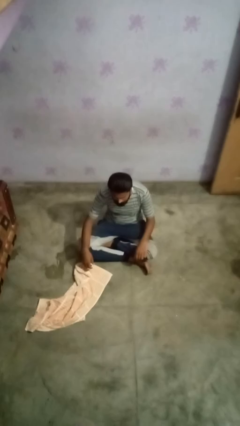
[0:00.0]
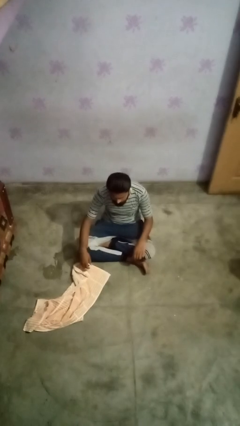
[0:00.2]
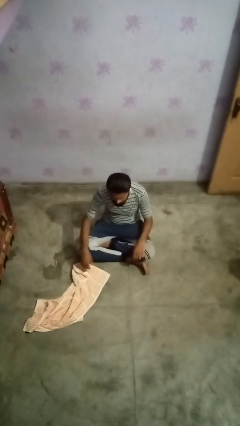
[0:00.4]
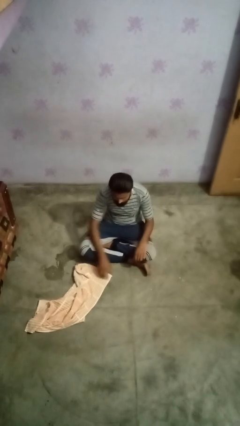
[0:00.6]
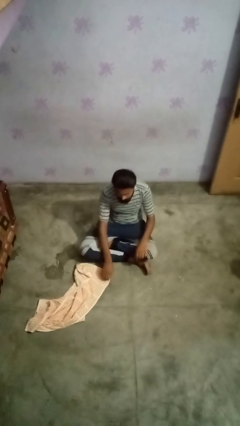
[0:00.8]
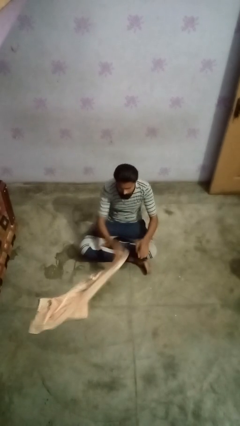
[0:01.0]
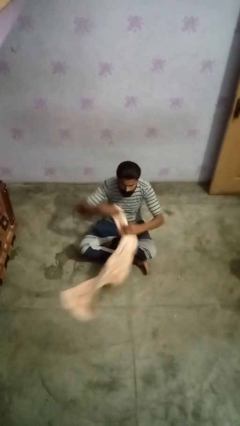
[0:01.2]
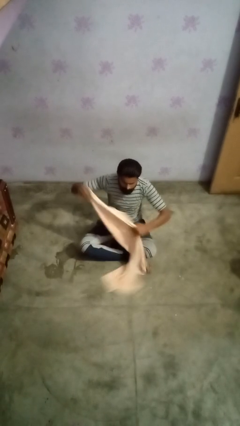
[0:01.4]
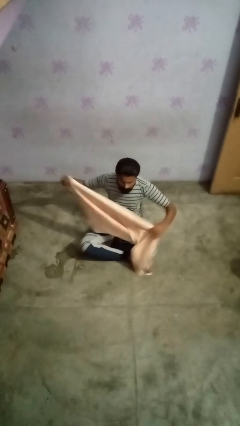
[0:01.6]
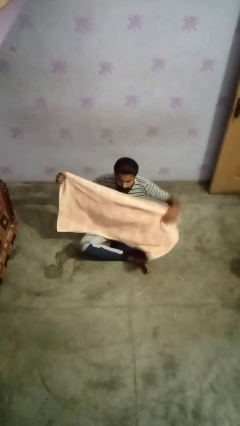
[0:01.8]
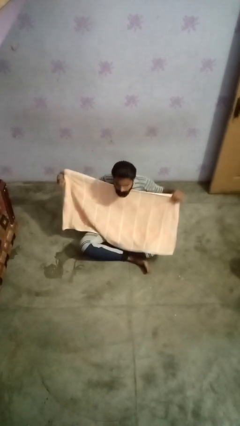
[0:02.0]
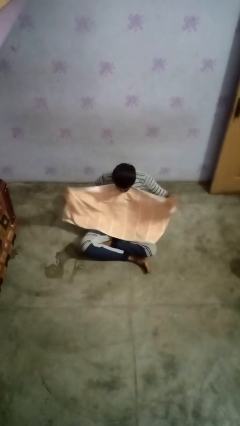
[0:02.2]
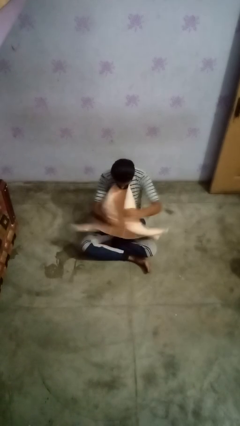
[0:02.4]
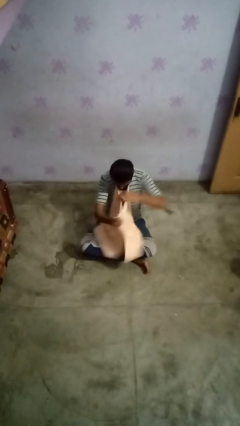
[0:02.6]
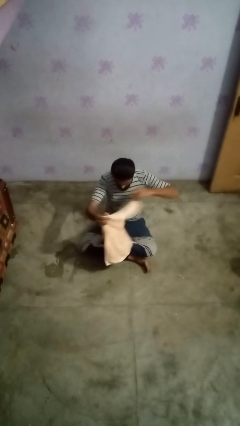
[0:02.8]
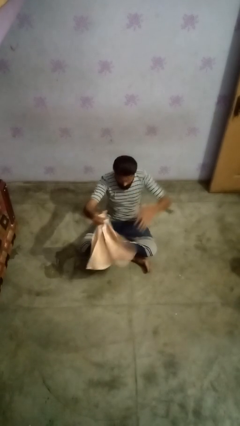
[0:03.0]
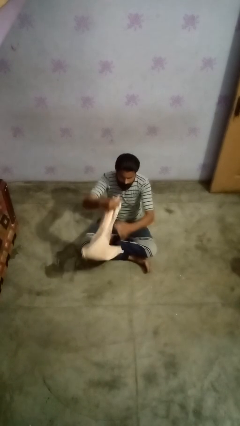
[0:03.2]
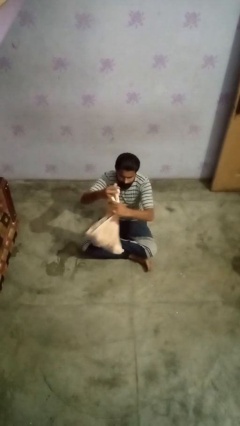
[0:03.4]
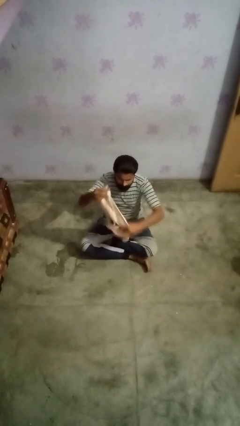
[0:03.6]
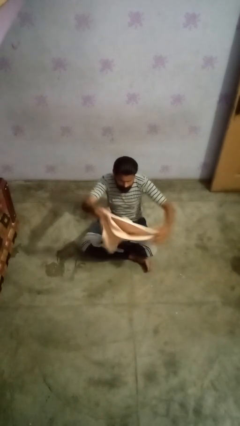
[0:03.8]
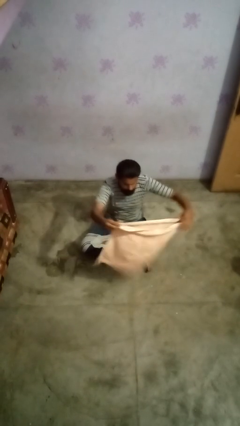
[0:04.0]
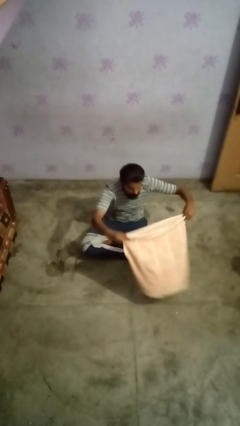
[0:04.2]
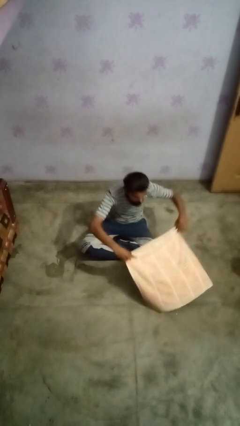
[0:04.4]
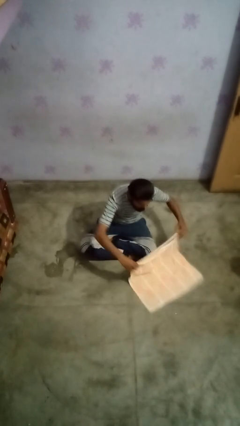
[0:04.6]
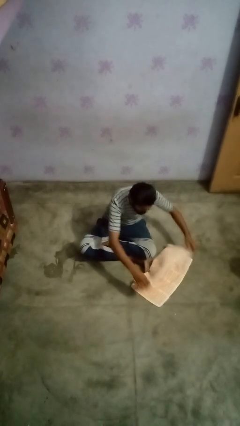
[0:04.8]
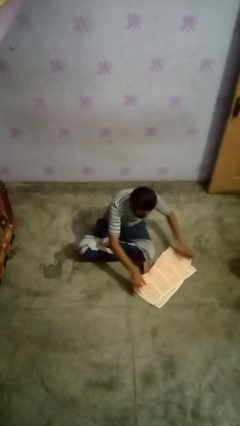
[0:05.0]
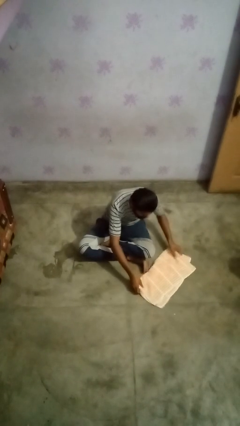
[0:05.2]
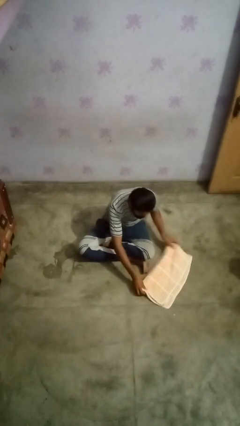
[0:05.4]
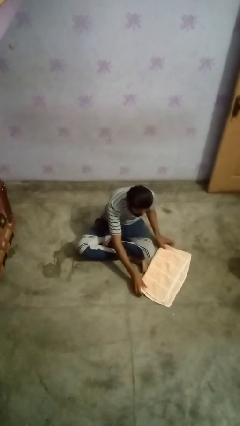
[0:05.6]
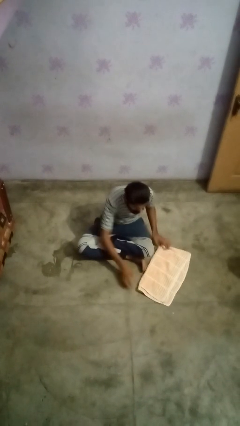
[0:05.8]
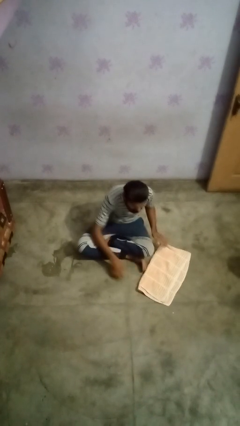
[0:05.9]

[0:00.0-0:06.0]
person folds towel

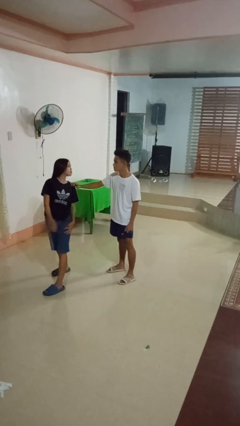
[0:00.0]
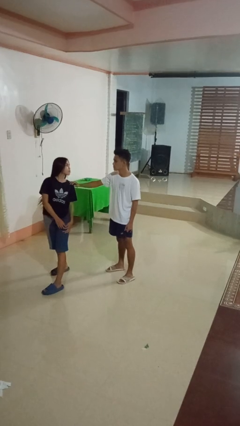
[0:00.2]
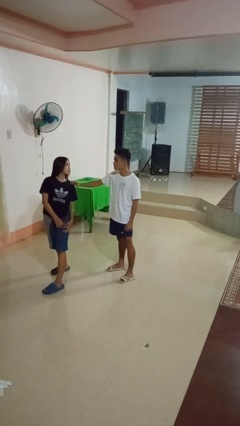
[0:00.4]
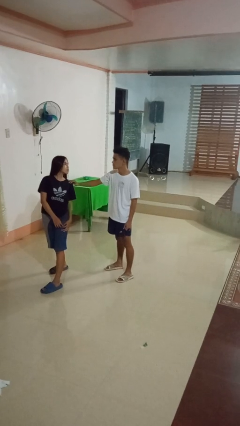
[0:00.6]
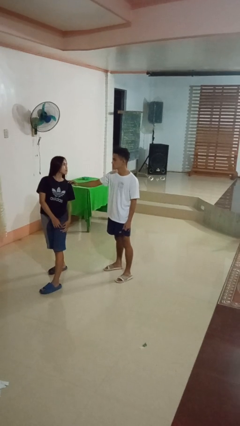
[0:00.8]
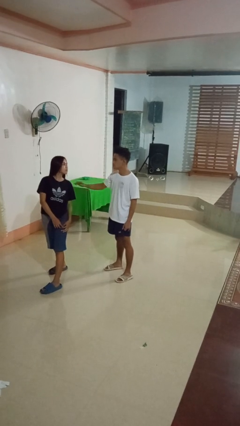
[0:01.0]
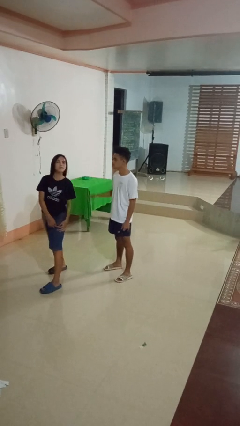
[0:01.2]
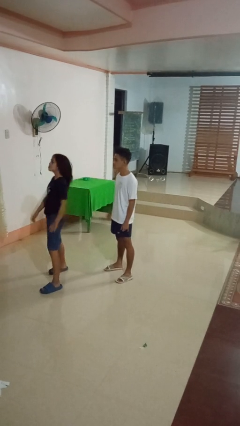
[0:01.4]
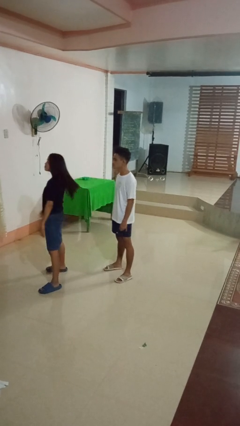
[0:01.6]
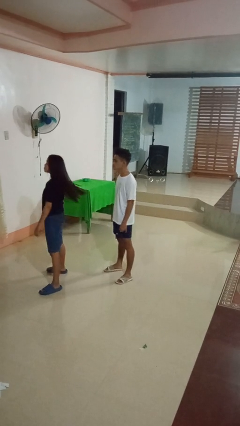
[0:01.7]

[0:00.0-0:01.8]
person spins person around

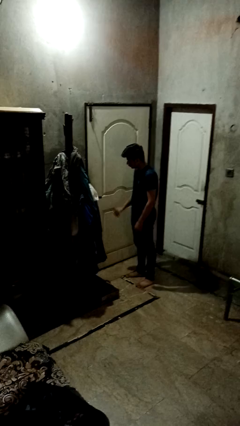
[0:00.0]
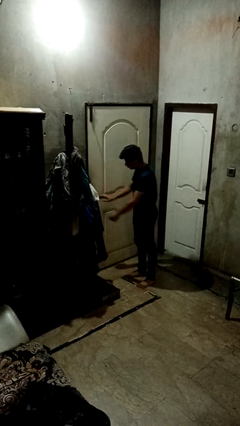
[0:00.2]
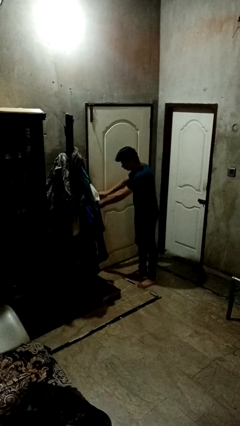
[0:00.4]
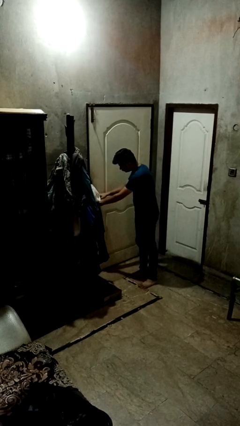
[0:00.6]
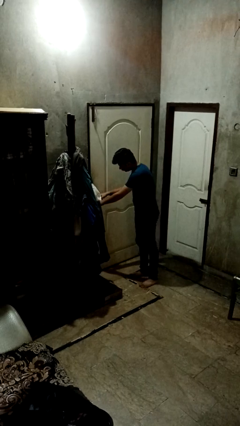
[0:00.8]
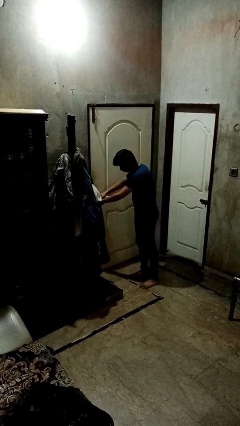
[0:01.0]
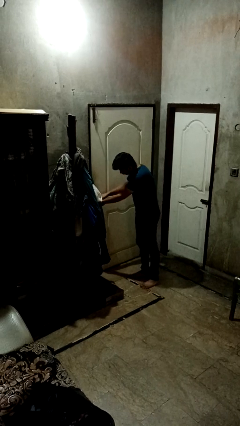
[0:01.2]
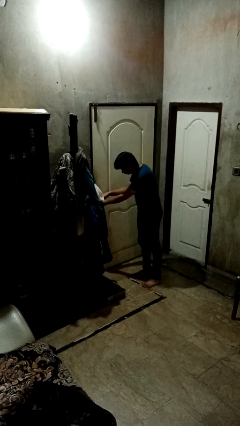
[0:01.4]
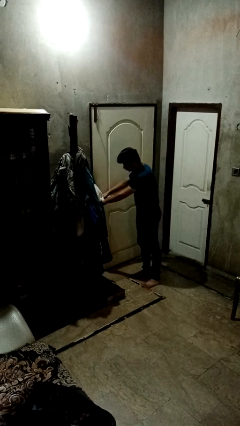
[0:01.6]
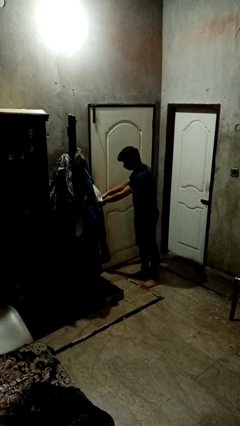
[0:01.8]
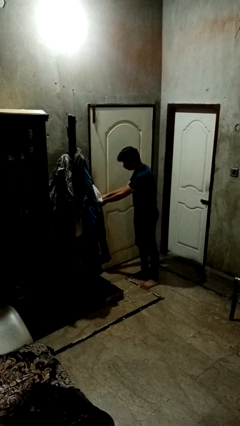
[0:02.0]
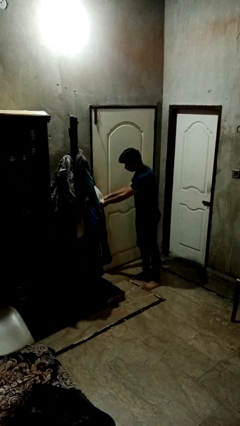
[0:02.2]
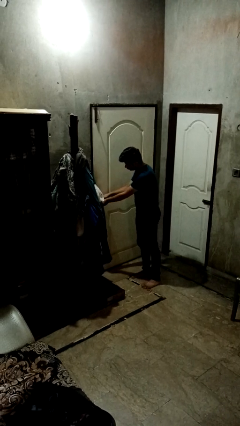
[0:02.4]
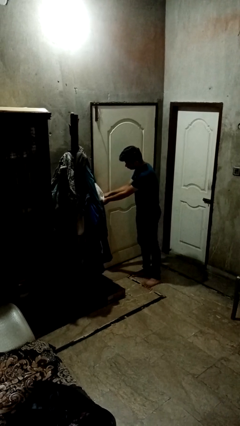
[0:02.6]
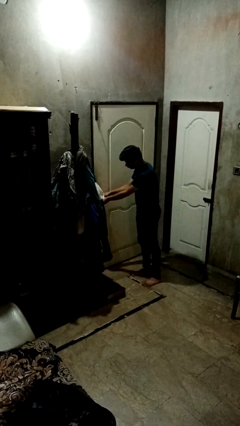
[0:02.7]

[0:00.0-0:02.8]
person unlocks door with keys

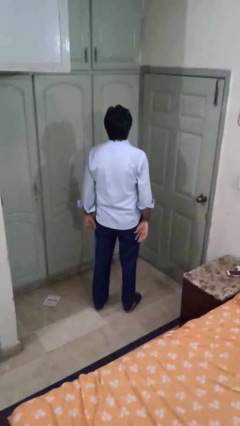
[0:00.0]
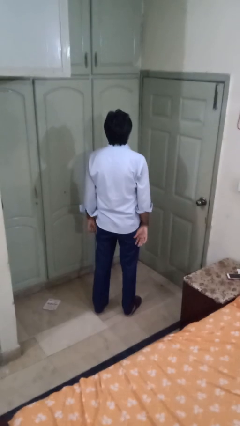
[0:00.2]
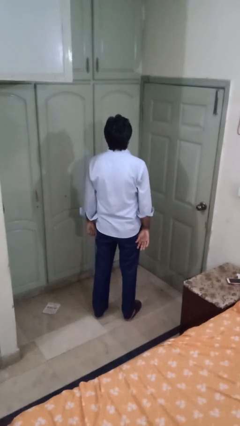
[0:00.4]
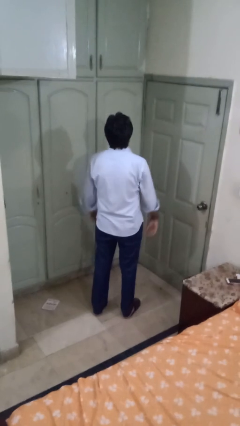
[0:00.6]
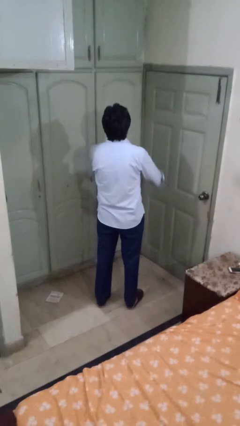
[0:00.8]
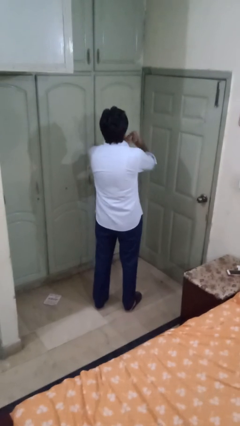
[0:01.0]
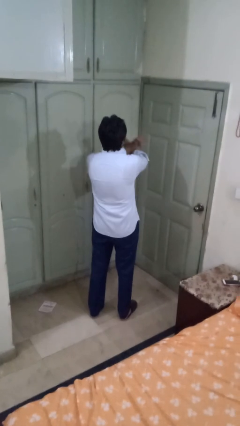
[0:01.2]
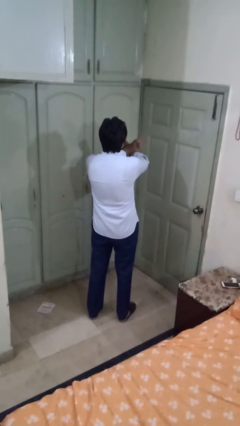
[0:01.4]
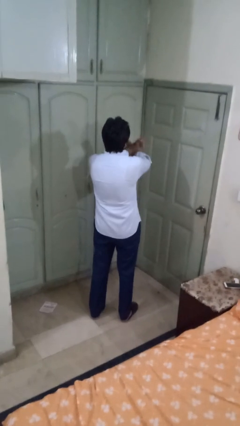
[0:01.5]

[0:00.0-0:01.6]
person gestures arms x

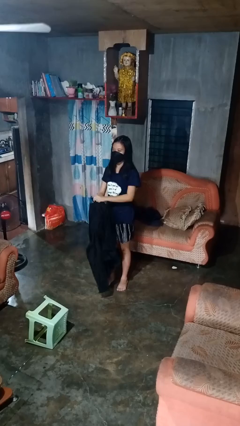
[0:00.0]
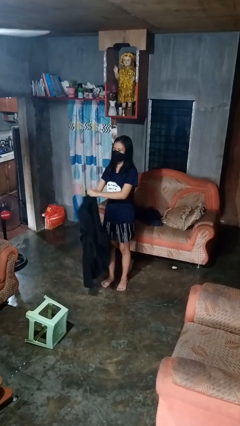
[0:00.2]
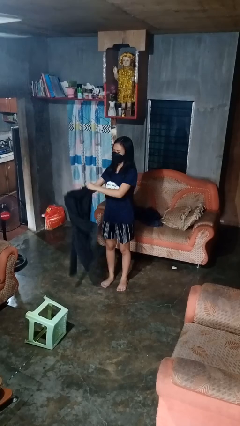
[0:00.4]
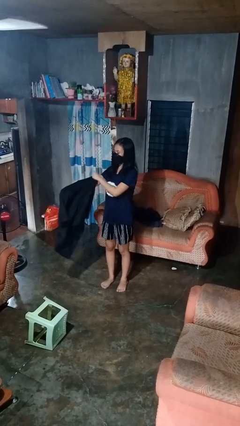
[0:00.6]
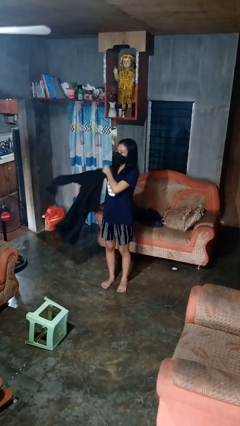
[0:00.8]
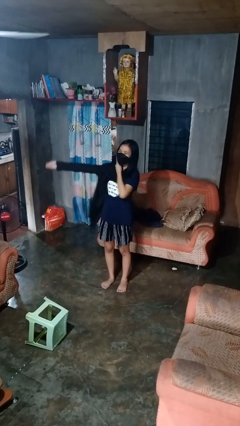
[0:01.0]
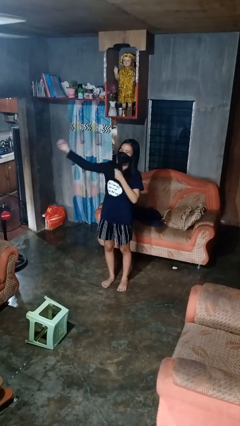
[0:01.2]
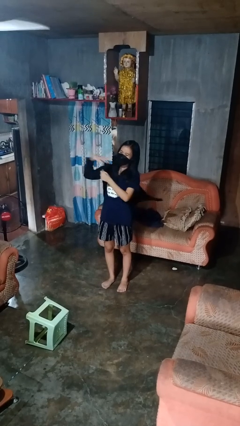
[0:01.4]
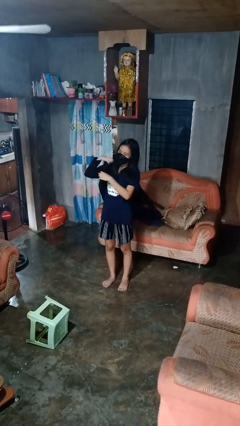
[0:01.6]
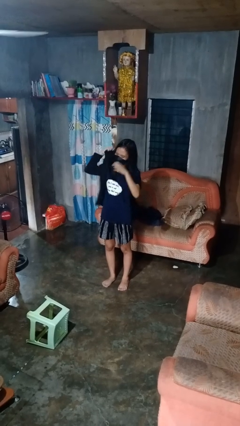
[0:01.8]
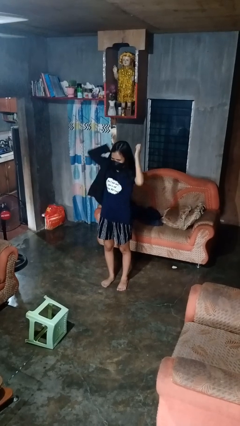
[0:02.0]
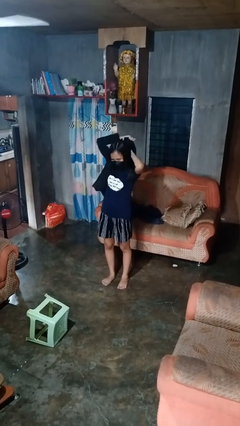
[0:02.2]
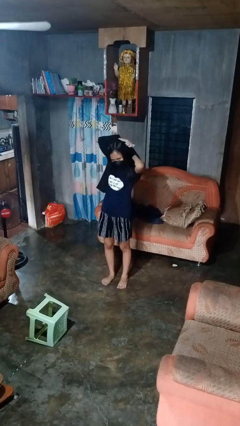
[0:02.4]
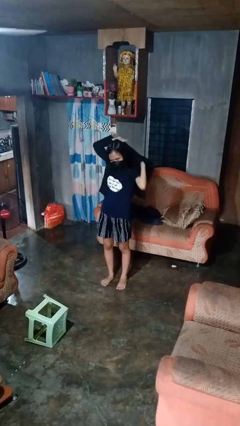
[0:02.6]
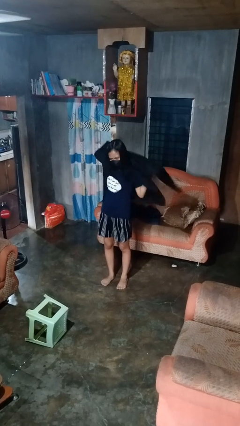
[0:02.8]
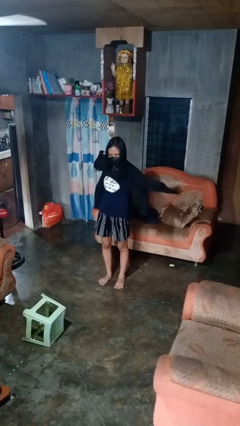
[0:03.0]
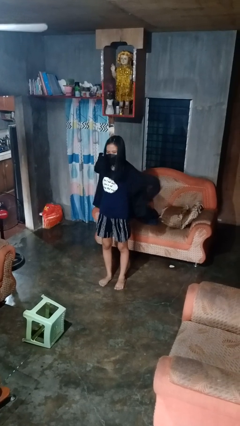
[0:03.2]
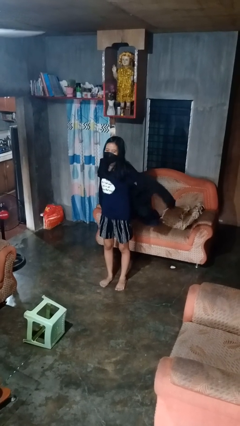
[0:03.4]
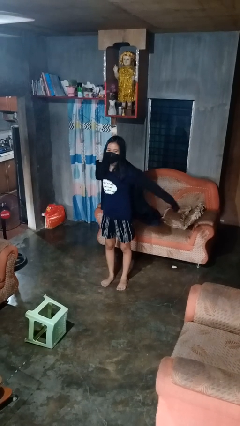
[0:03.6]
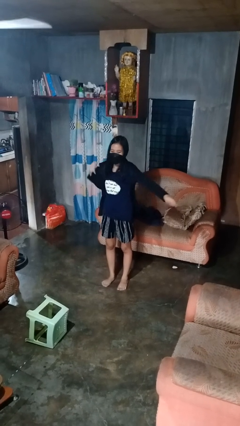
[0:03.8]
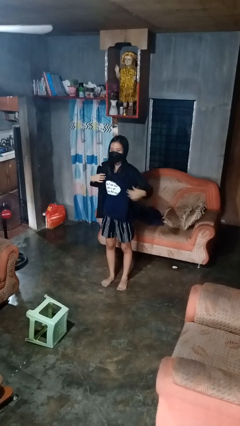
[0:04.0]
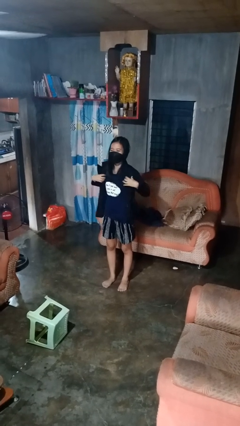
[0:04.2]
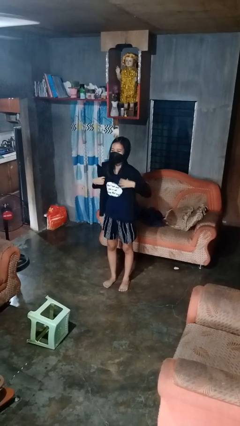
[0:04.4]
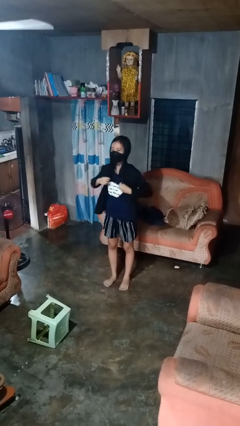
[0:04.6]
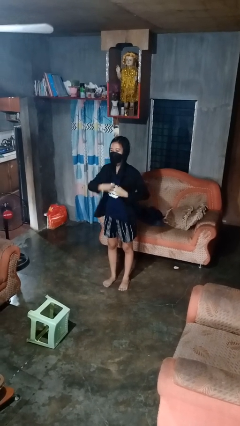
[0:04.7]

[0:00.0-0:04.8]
person puts on shirt

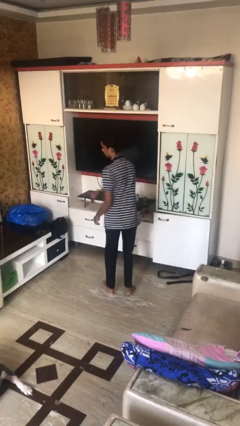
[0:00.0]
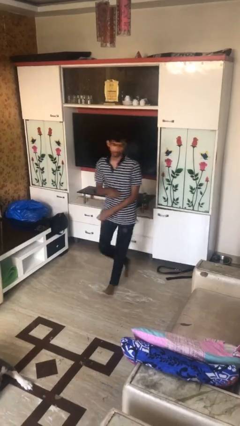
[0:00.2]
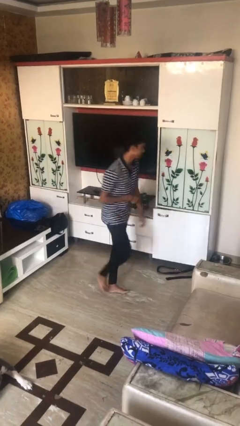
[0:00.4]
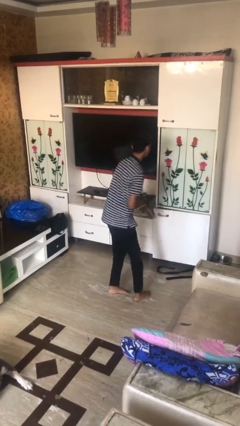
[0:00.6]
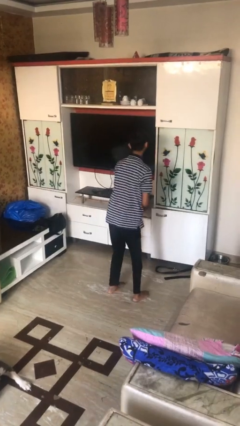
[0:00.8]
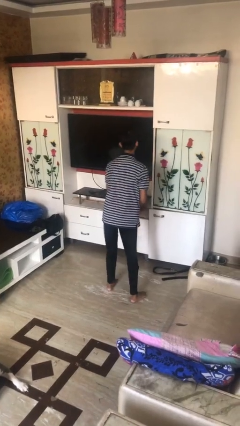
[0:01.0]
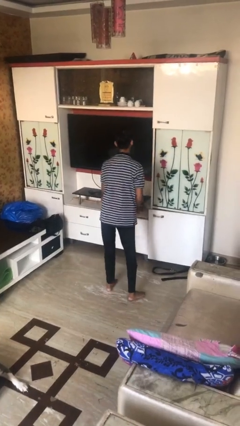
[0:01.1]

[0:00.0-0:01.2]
person twirls
